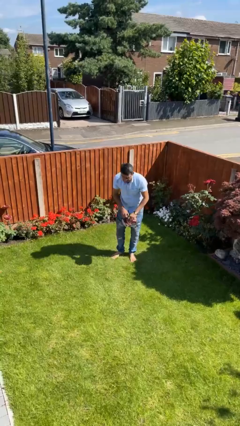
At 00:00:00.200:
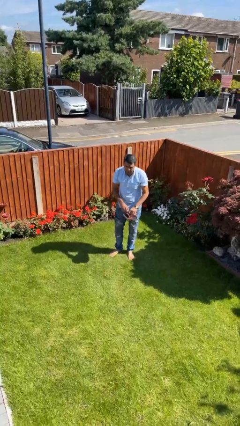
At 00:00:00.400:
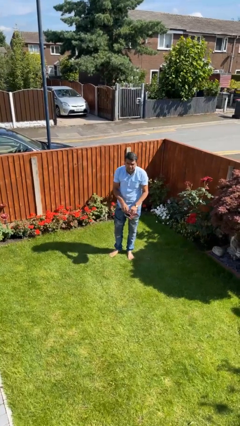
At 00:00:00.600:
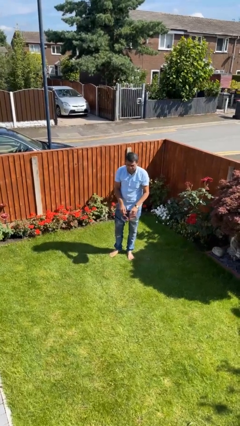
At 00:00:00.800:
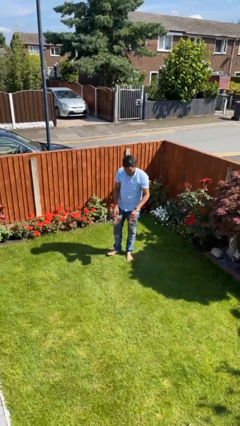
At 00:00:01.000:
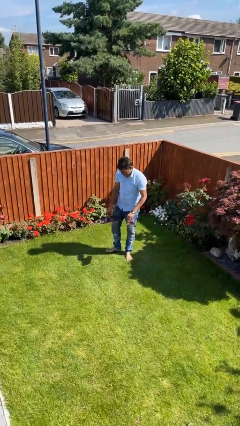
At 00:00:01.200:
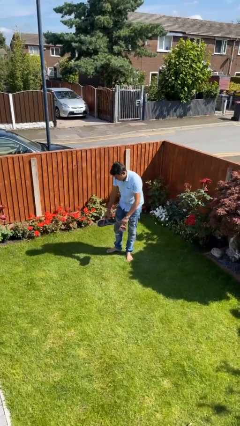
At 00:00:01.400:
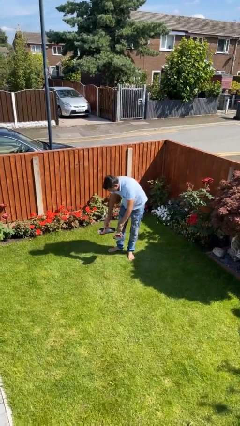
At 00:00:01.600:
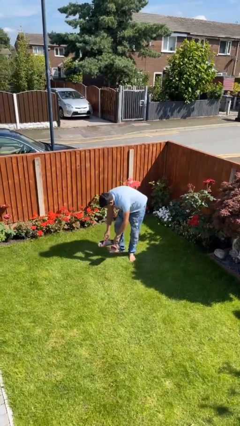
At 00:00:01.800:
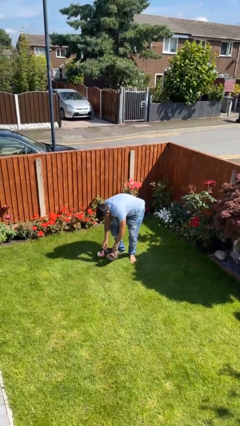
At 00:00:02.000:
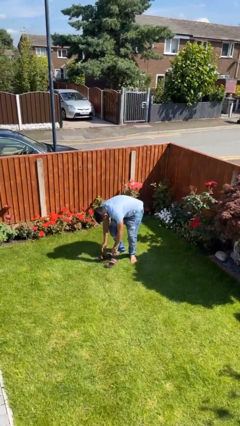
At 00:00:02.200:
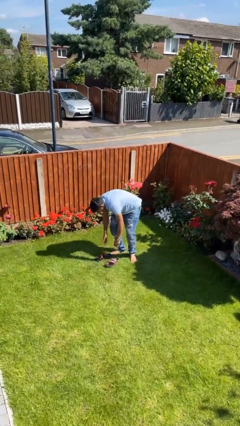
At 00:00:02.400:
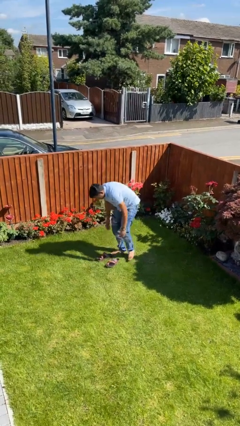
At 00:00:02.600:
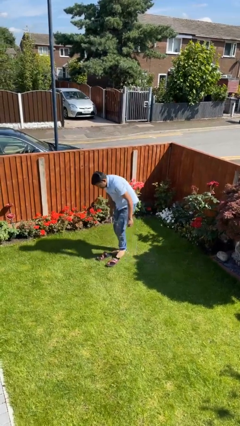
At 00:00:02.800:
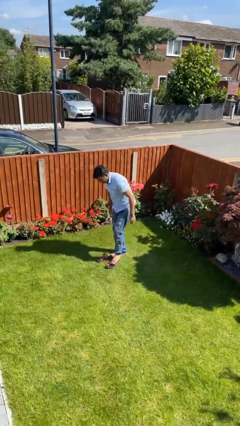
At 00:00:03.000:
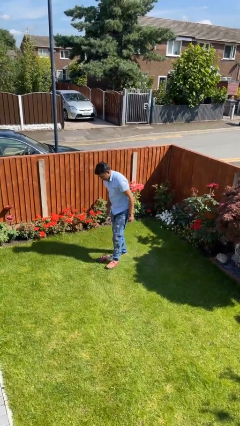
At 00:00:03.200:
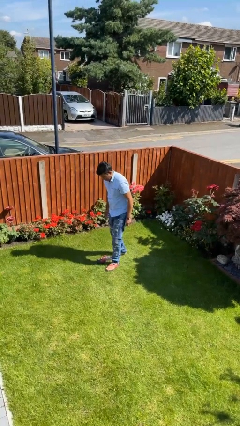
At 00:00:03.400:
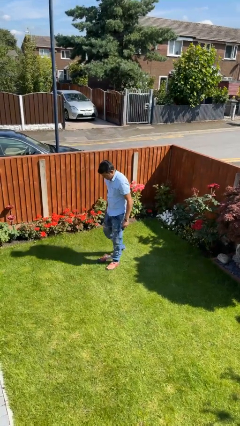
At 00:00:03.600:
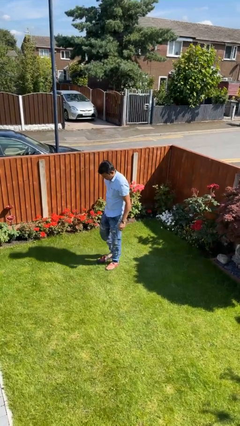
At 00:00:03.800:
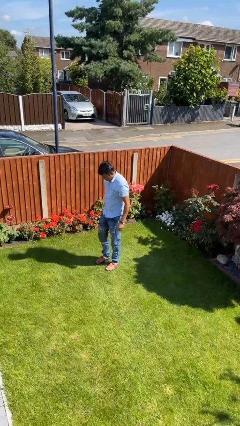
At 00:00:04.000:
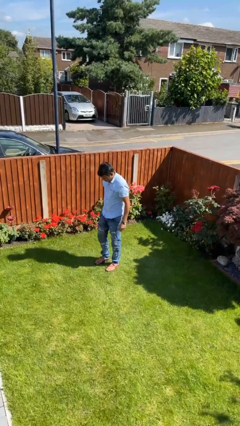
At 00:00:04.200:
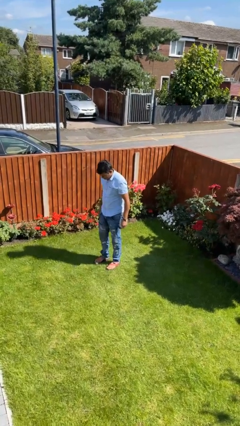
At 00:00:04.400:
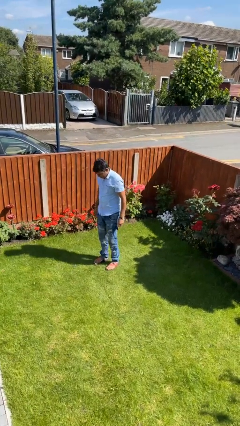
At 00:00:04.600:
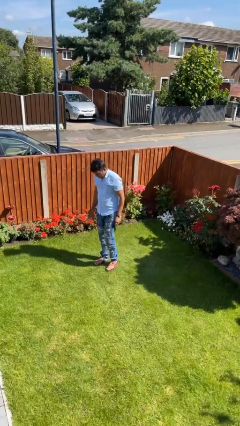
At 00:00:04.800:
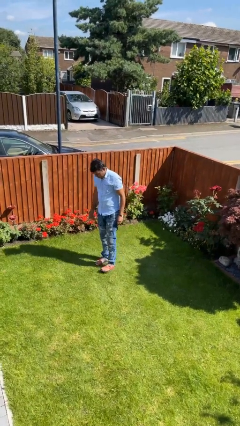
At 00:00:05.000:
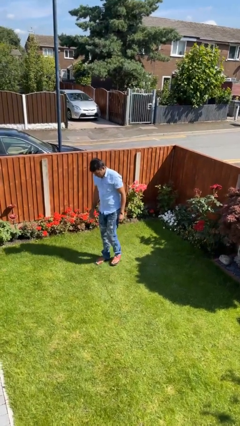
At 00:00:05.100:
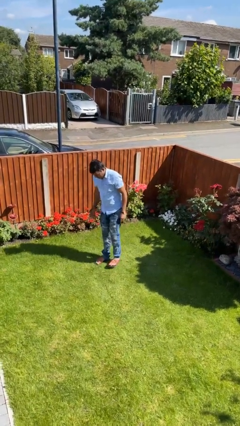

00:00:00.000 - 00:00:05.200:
person puts on shoes

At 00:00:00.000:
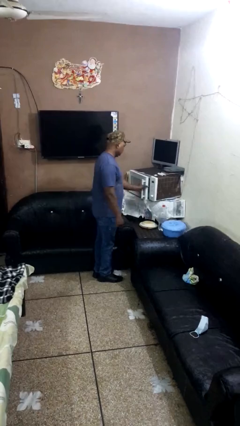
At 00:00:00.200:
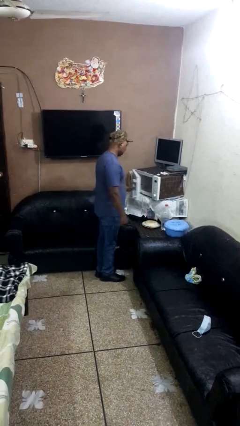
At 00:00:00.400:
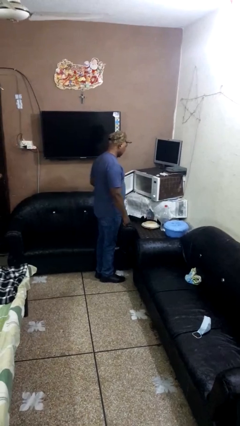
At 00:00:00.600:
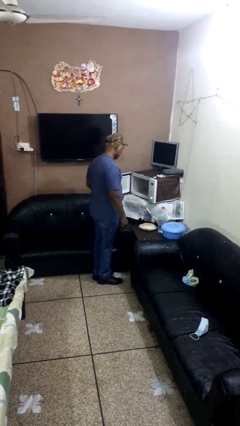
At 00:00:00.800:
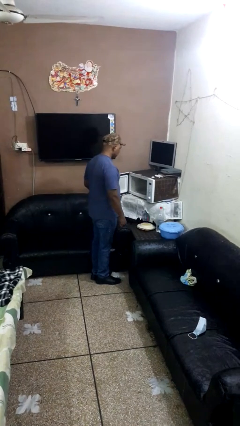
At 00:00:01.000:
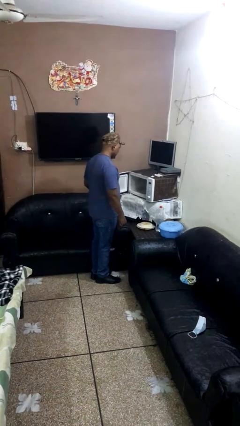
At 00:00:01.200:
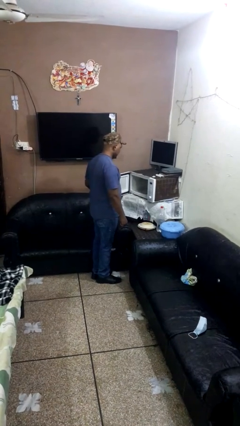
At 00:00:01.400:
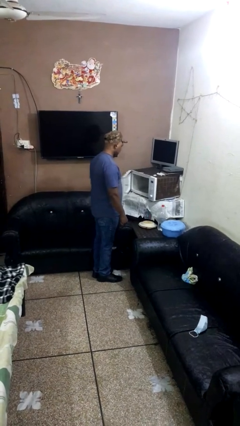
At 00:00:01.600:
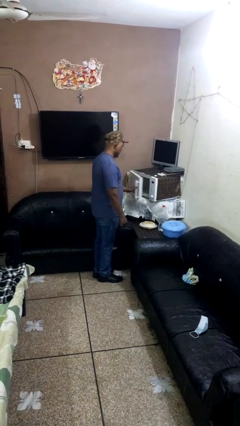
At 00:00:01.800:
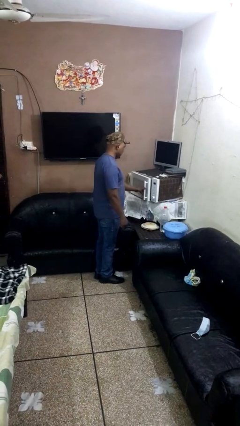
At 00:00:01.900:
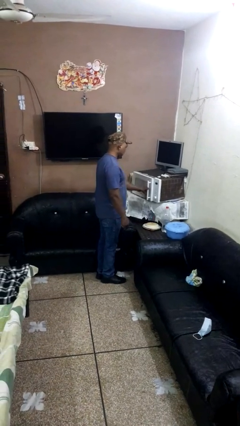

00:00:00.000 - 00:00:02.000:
person opens oven door

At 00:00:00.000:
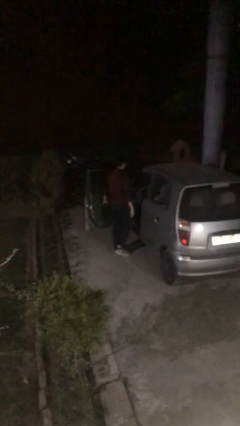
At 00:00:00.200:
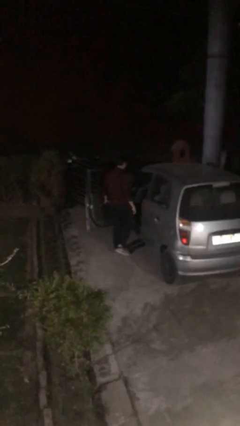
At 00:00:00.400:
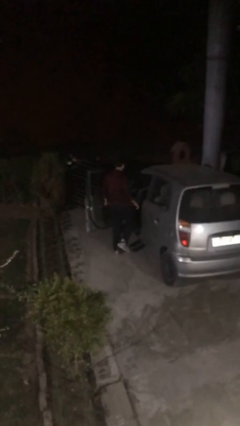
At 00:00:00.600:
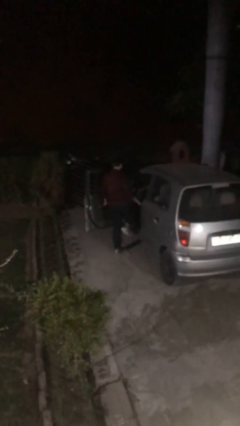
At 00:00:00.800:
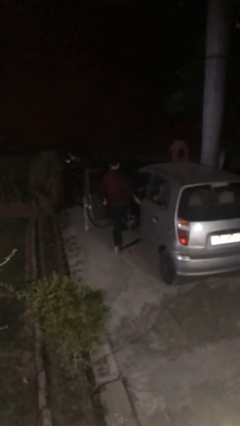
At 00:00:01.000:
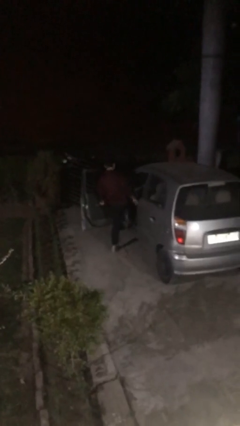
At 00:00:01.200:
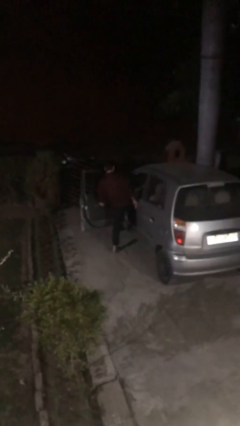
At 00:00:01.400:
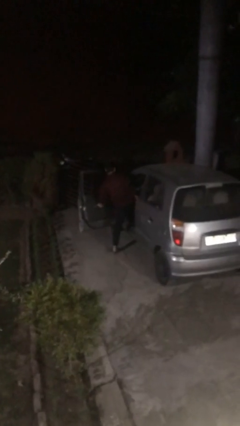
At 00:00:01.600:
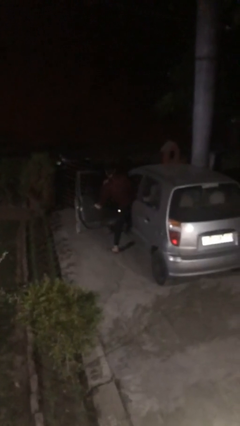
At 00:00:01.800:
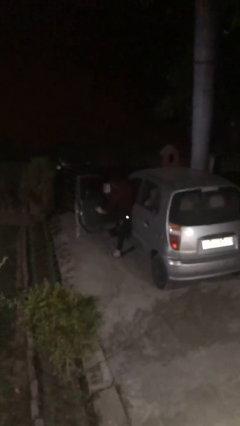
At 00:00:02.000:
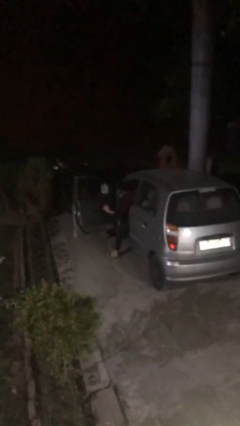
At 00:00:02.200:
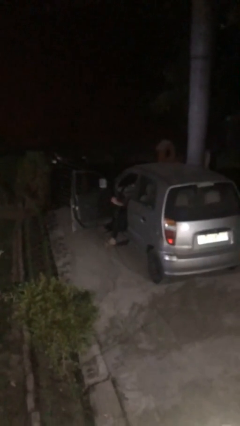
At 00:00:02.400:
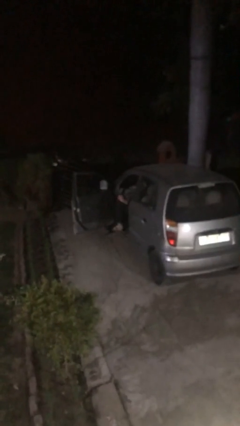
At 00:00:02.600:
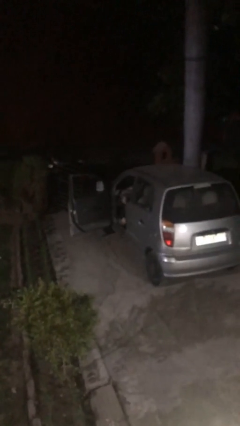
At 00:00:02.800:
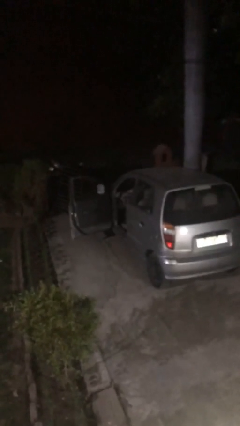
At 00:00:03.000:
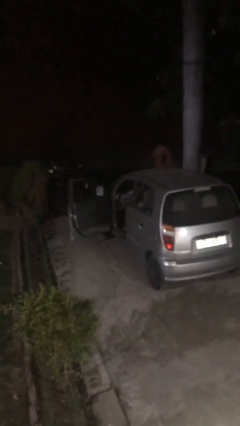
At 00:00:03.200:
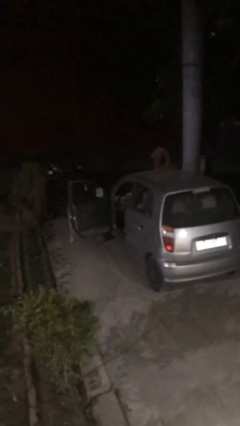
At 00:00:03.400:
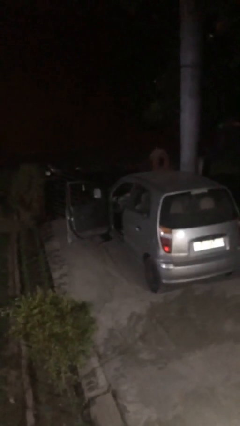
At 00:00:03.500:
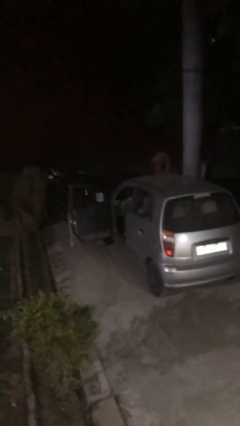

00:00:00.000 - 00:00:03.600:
person enters car

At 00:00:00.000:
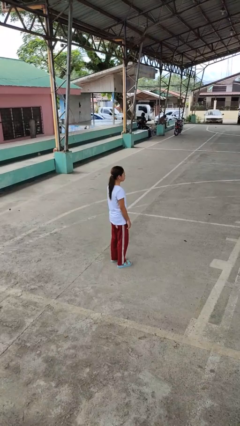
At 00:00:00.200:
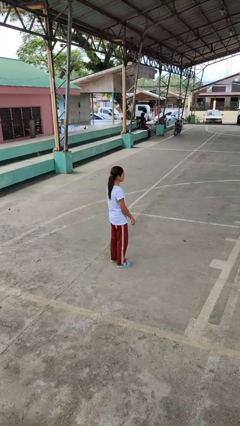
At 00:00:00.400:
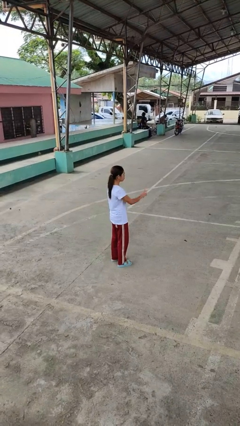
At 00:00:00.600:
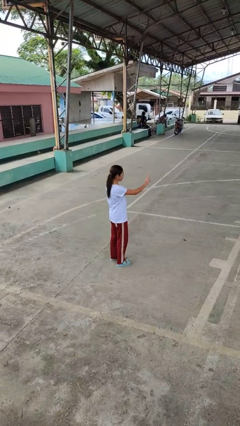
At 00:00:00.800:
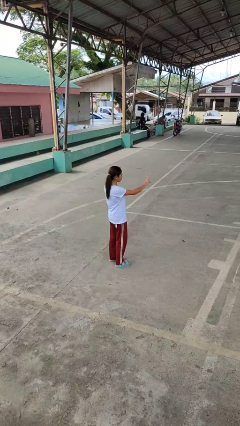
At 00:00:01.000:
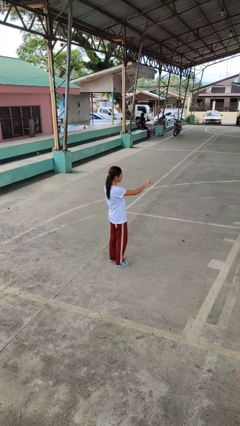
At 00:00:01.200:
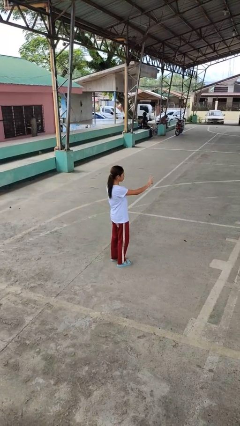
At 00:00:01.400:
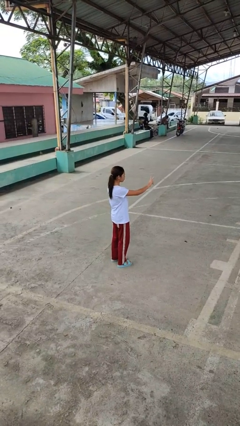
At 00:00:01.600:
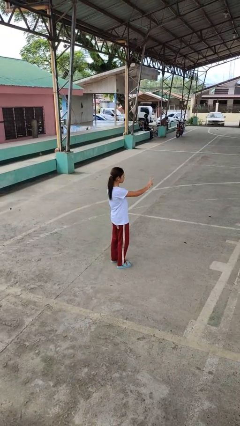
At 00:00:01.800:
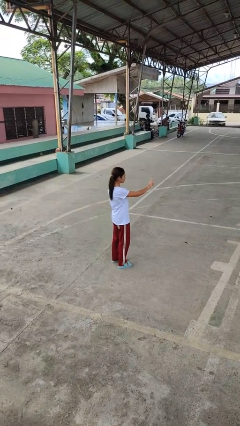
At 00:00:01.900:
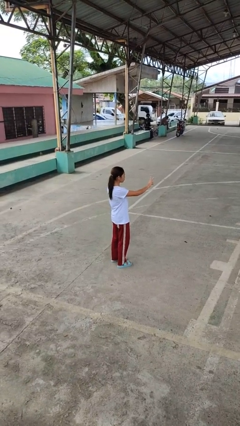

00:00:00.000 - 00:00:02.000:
person gestures peace

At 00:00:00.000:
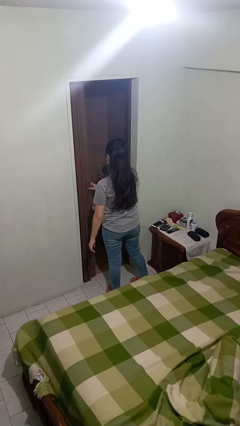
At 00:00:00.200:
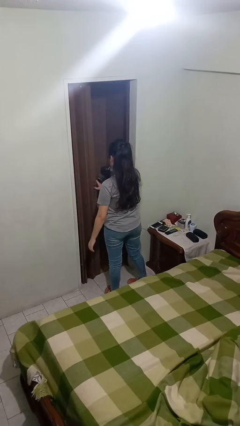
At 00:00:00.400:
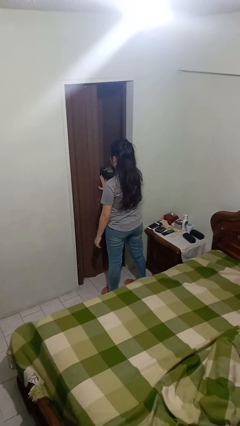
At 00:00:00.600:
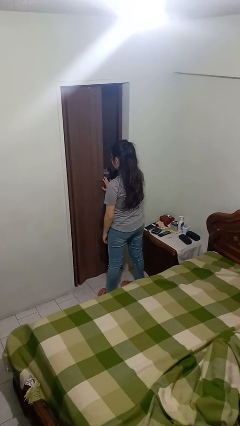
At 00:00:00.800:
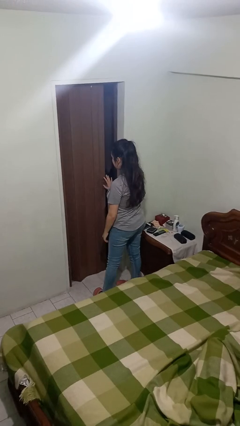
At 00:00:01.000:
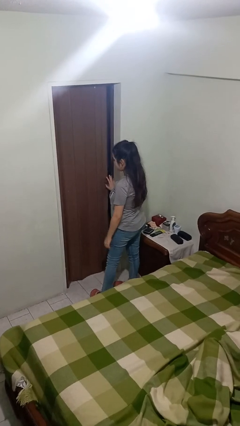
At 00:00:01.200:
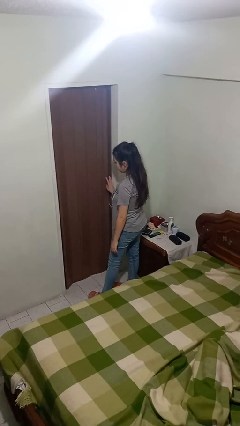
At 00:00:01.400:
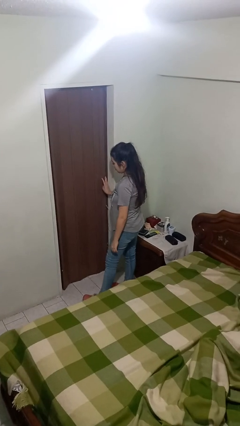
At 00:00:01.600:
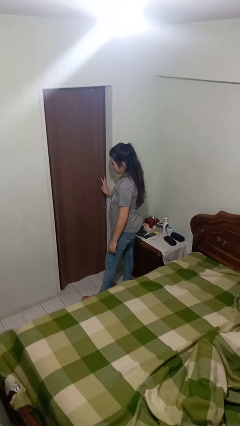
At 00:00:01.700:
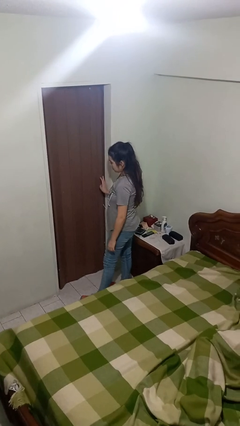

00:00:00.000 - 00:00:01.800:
person closes sliding door

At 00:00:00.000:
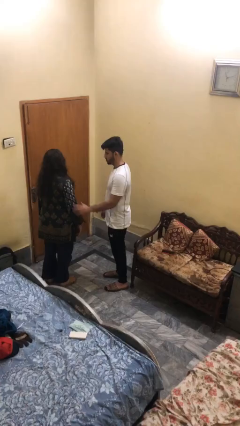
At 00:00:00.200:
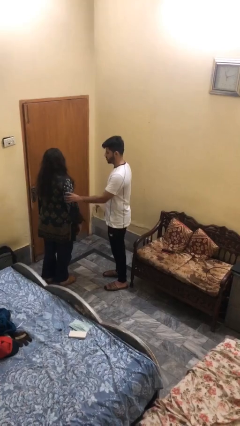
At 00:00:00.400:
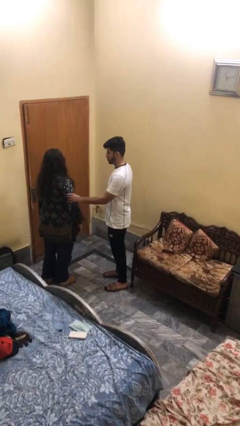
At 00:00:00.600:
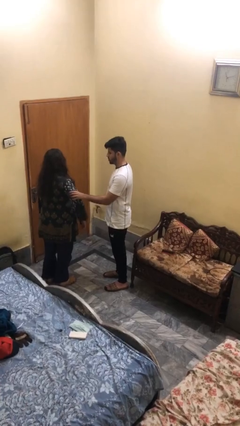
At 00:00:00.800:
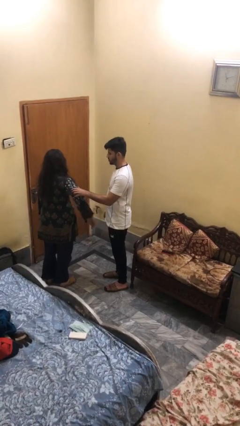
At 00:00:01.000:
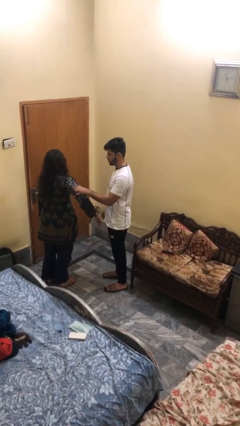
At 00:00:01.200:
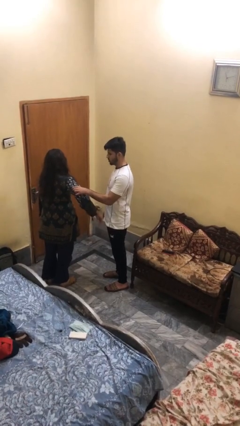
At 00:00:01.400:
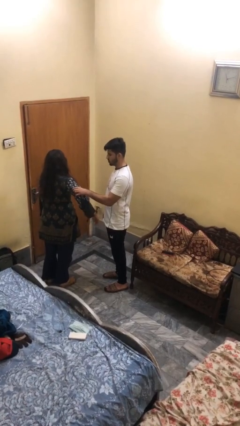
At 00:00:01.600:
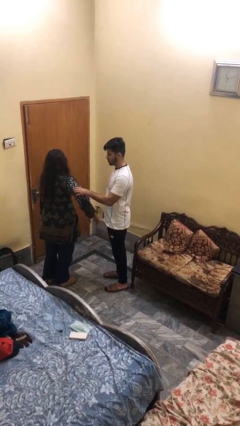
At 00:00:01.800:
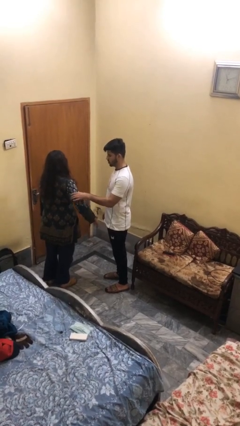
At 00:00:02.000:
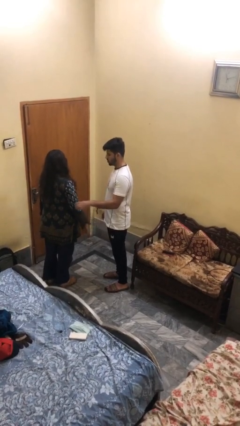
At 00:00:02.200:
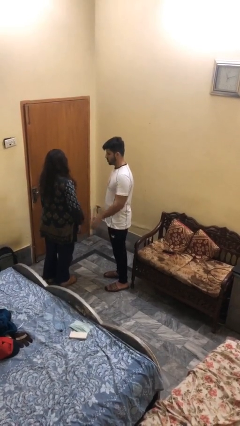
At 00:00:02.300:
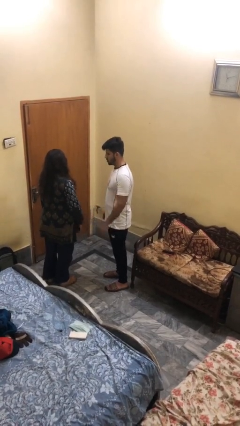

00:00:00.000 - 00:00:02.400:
person grabs person by bicep

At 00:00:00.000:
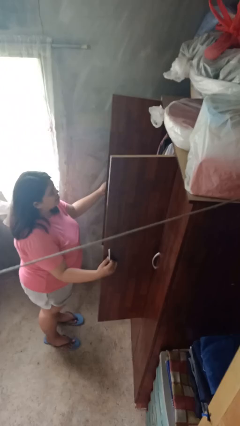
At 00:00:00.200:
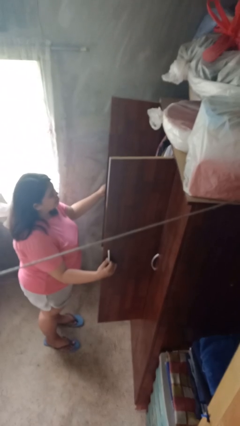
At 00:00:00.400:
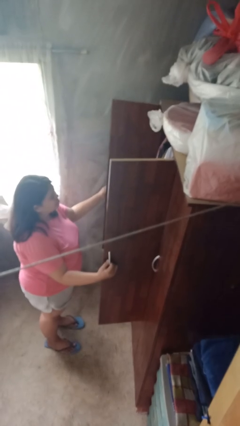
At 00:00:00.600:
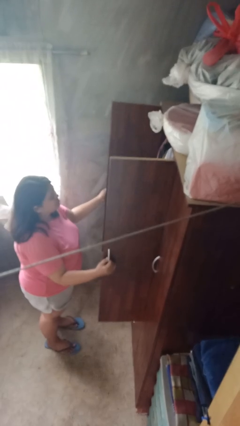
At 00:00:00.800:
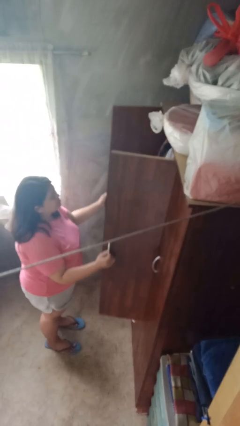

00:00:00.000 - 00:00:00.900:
person closes closet door
